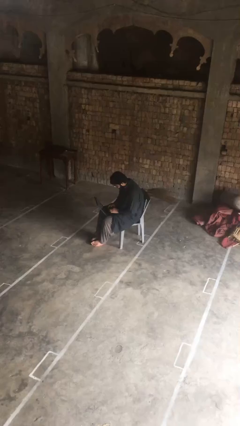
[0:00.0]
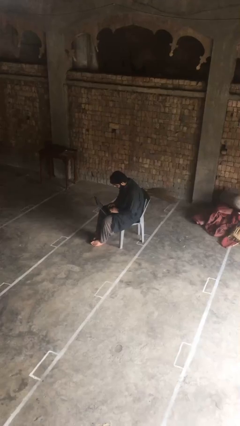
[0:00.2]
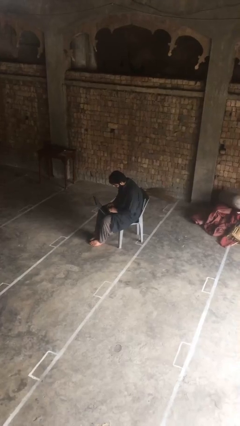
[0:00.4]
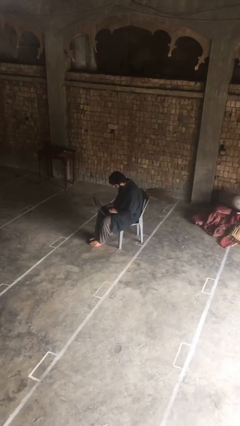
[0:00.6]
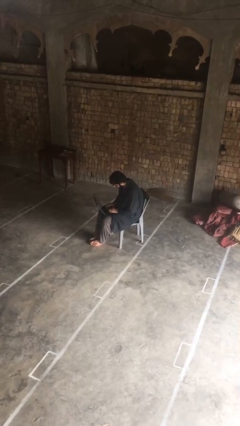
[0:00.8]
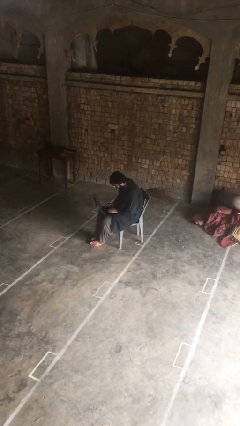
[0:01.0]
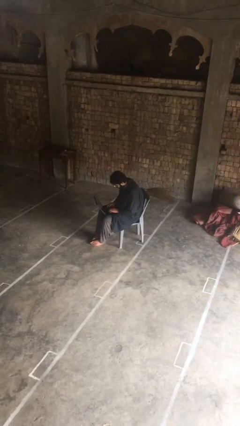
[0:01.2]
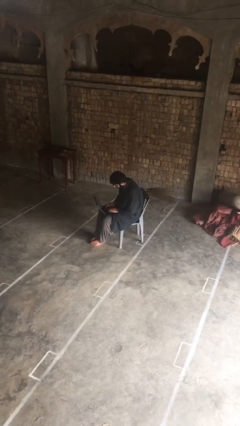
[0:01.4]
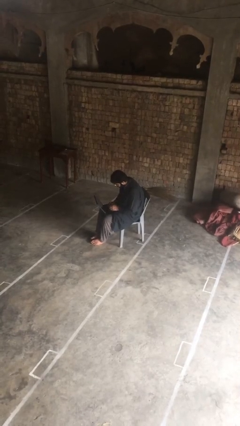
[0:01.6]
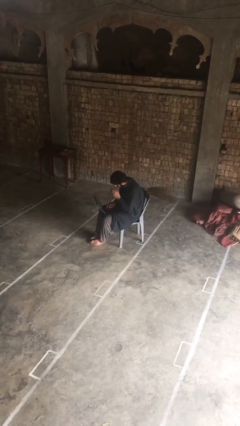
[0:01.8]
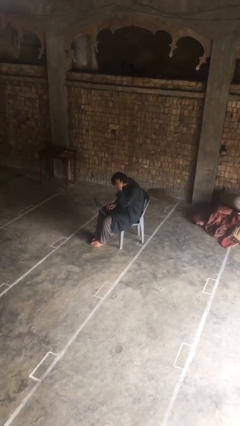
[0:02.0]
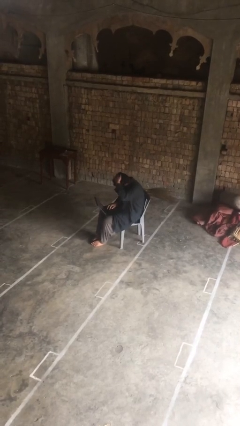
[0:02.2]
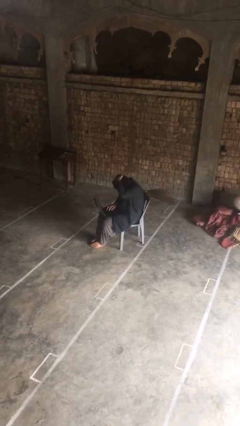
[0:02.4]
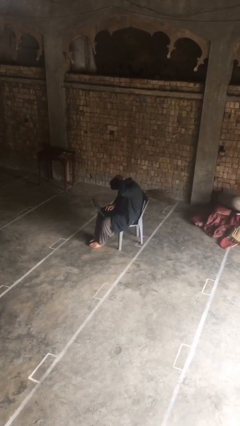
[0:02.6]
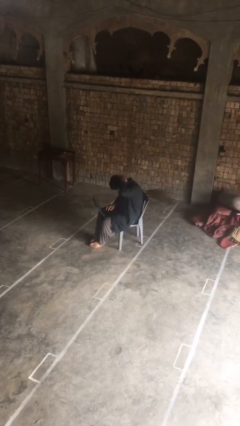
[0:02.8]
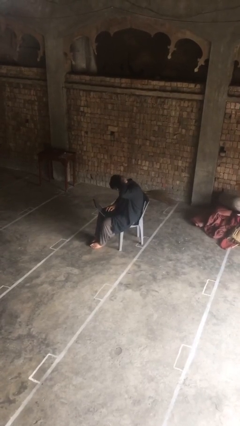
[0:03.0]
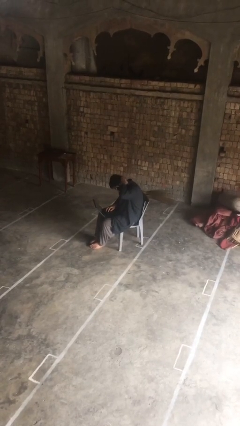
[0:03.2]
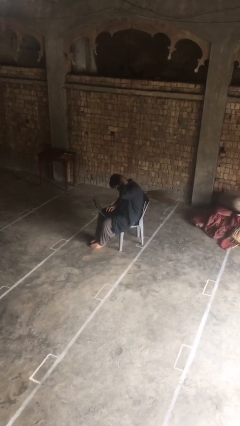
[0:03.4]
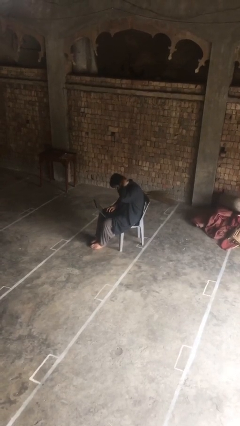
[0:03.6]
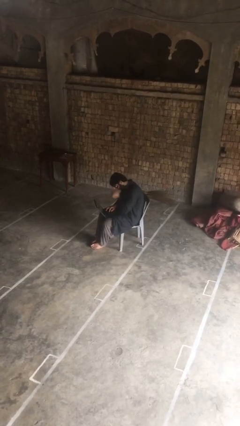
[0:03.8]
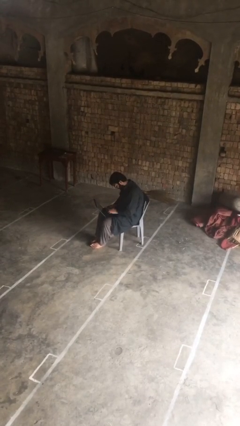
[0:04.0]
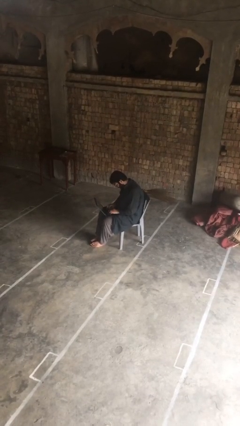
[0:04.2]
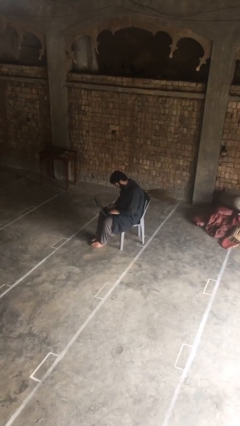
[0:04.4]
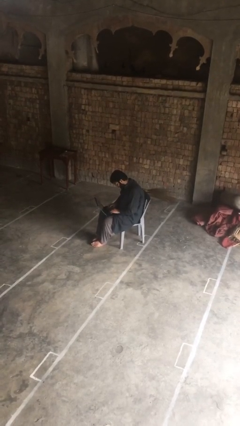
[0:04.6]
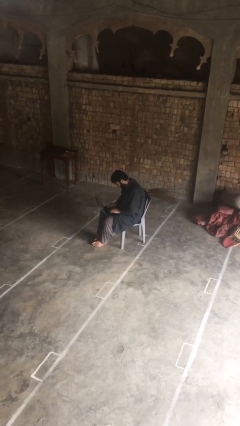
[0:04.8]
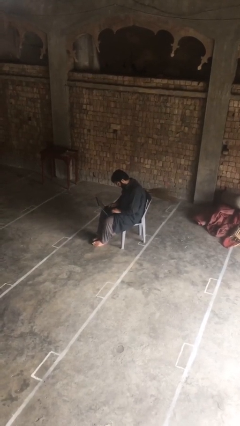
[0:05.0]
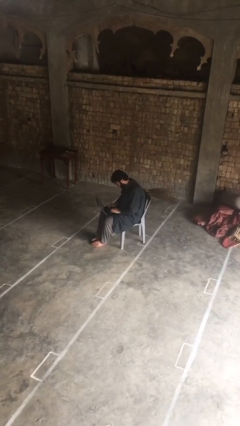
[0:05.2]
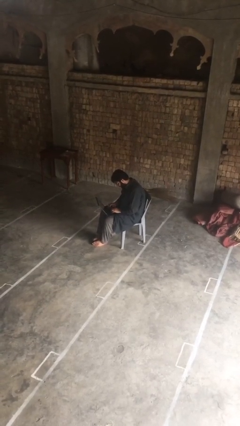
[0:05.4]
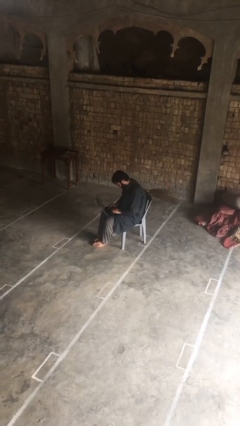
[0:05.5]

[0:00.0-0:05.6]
person interacts with laptop

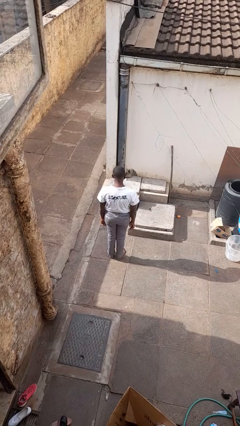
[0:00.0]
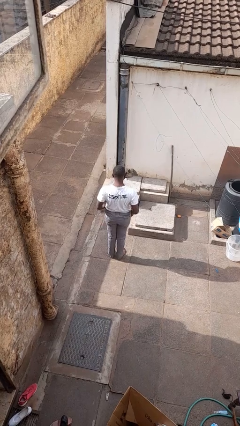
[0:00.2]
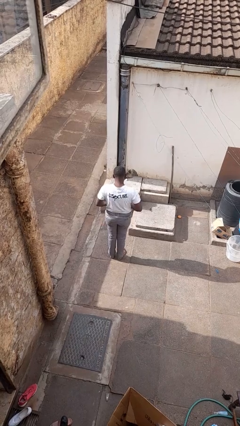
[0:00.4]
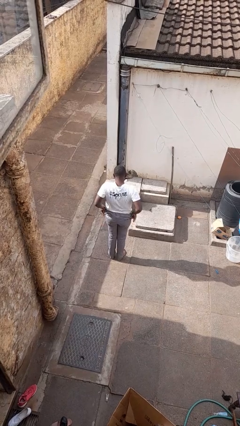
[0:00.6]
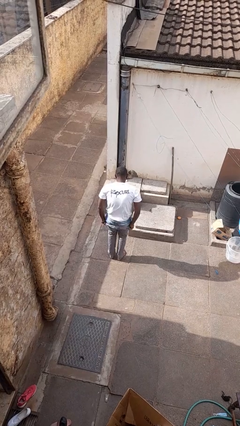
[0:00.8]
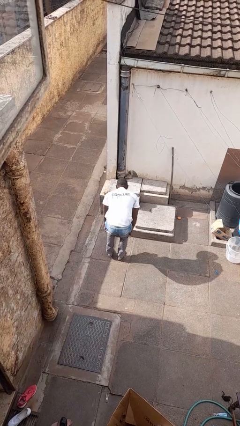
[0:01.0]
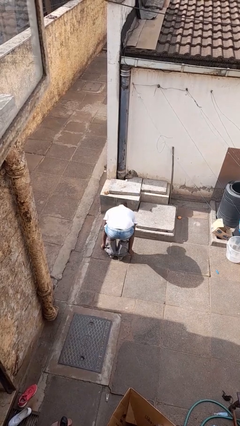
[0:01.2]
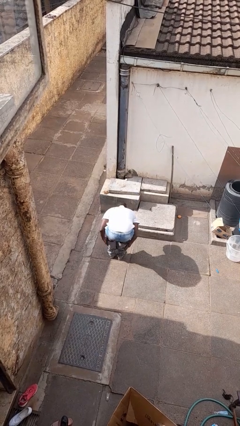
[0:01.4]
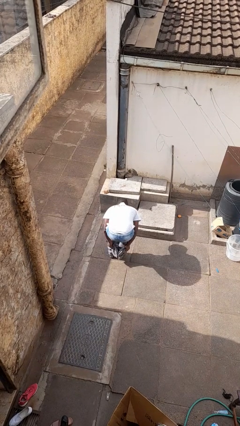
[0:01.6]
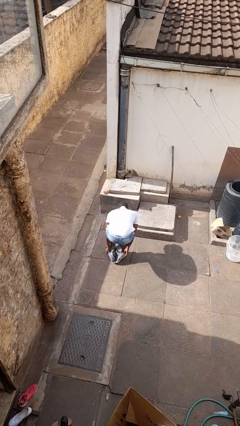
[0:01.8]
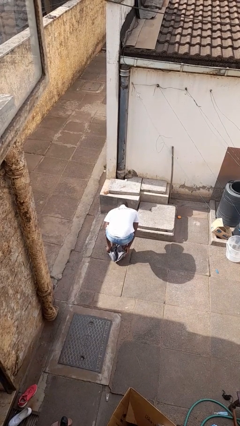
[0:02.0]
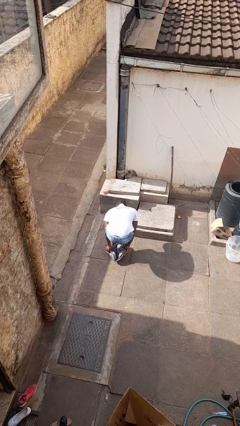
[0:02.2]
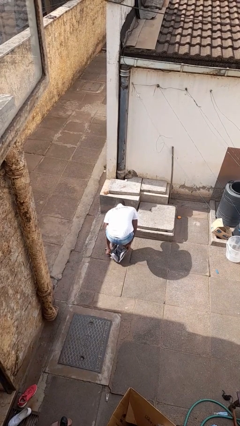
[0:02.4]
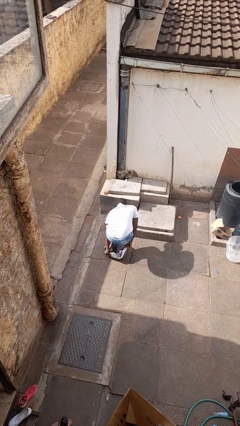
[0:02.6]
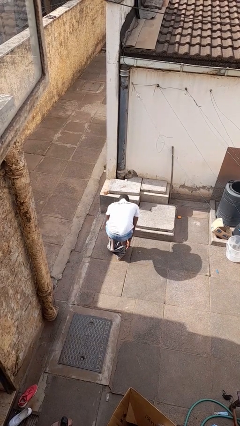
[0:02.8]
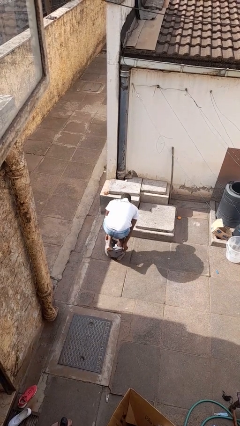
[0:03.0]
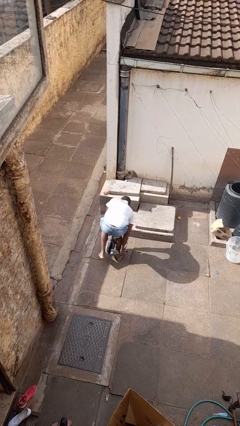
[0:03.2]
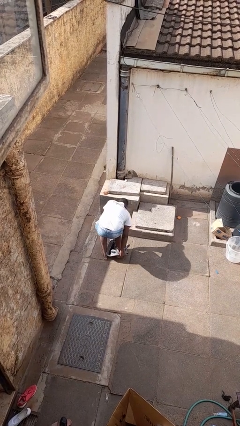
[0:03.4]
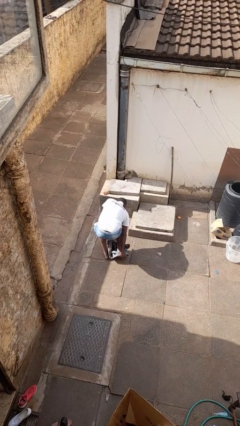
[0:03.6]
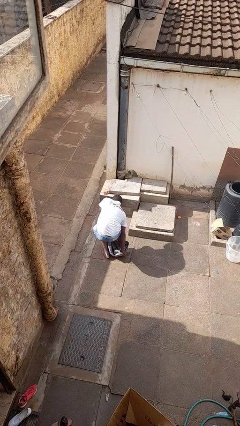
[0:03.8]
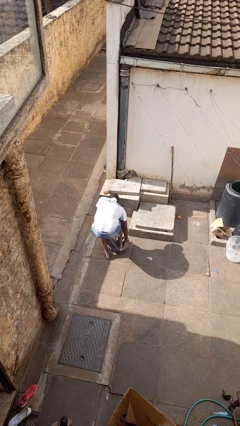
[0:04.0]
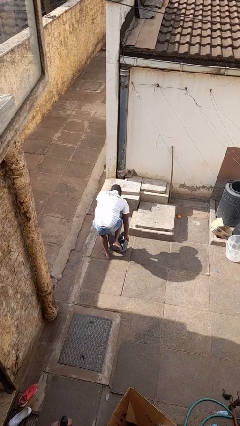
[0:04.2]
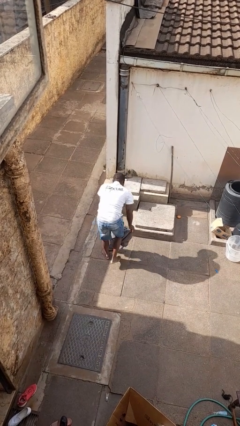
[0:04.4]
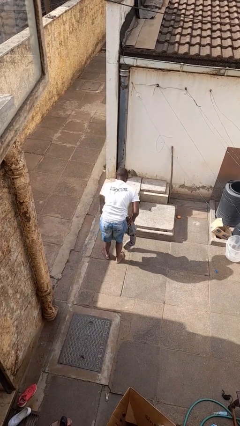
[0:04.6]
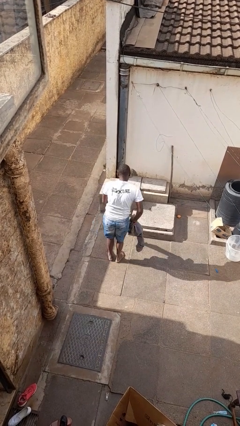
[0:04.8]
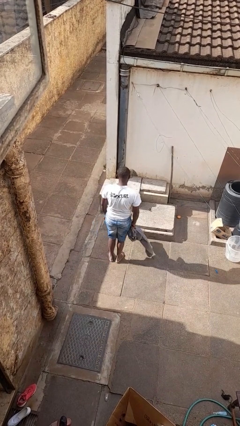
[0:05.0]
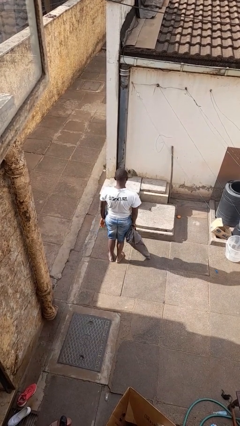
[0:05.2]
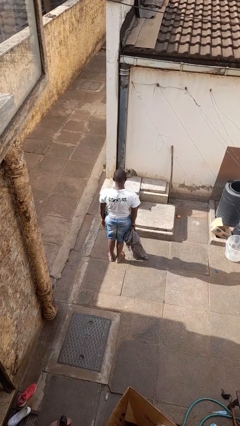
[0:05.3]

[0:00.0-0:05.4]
person takes off pants

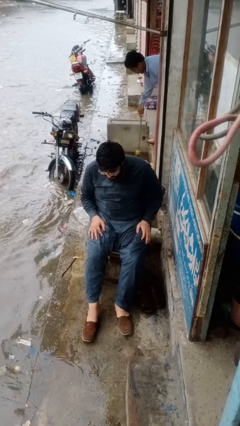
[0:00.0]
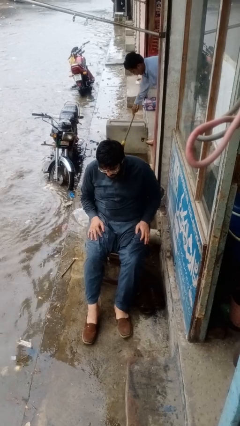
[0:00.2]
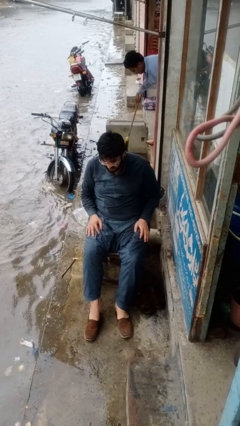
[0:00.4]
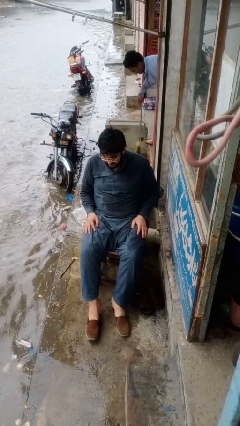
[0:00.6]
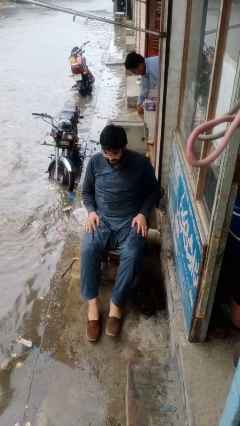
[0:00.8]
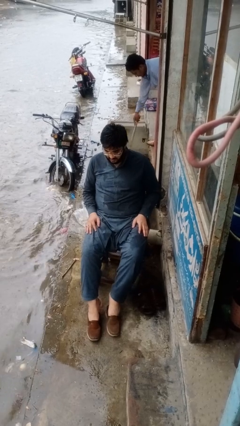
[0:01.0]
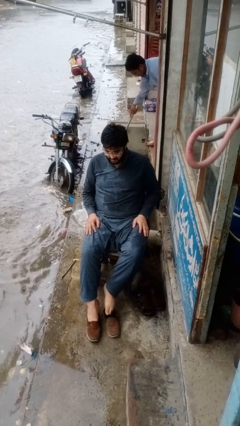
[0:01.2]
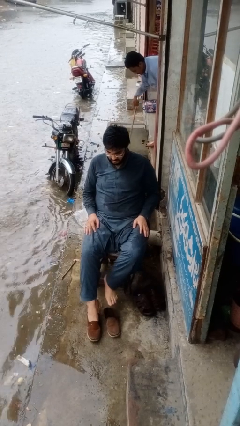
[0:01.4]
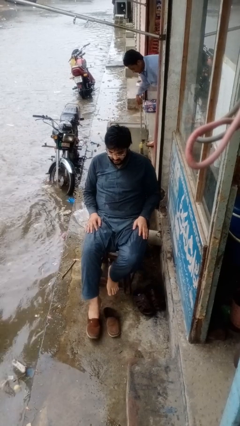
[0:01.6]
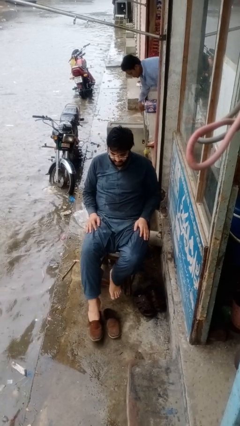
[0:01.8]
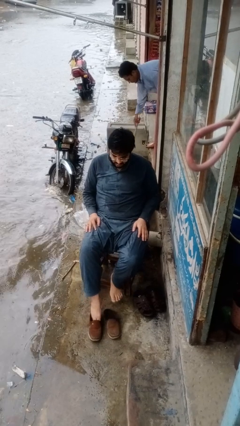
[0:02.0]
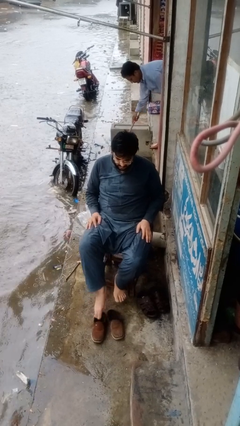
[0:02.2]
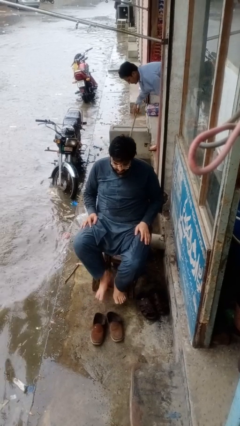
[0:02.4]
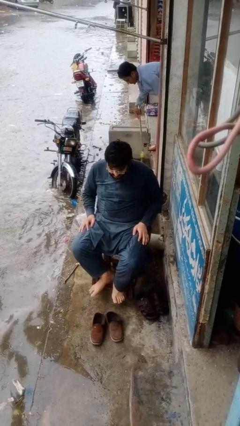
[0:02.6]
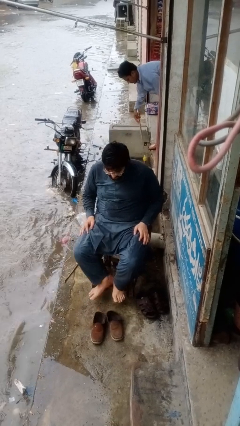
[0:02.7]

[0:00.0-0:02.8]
person takes off shoes

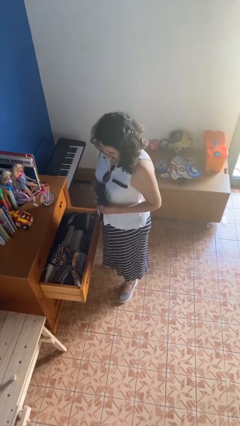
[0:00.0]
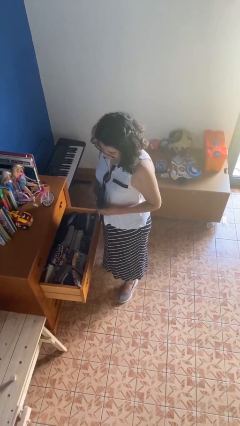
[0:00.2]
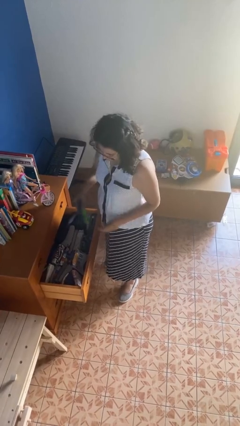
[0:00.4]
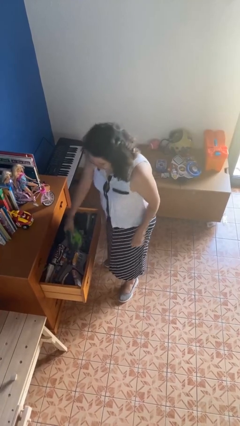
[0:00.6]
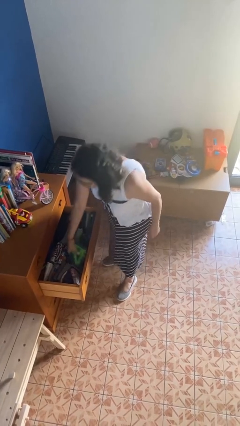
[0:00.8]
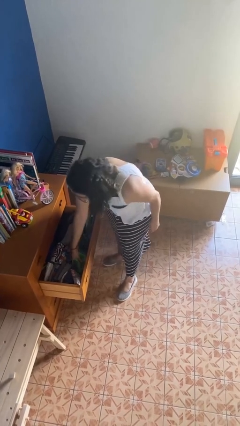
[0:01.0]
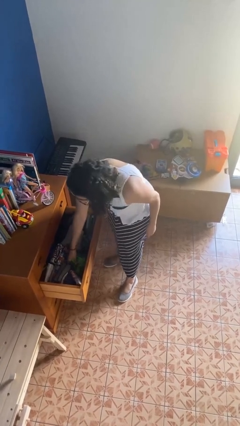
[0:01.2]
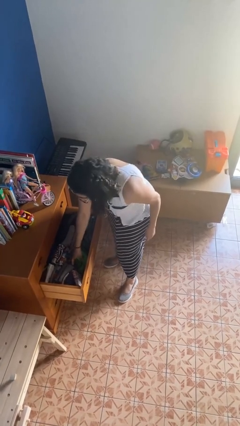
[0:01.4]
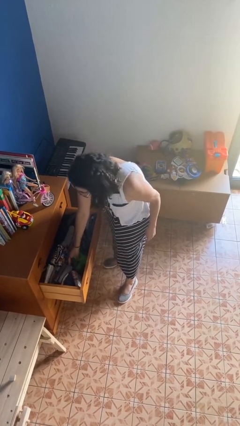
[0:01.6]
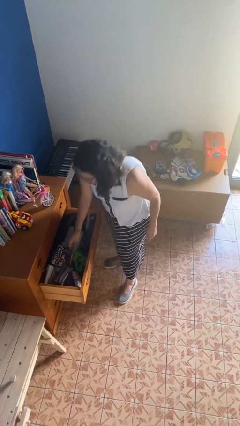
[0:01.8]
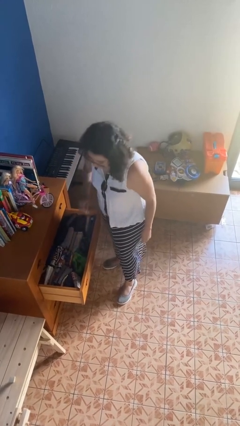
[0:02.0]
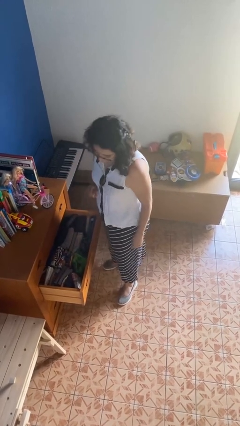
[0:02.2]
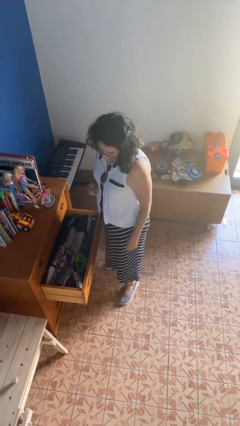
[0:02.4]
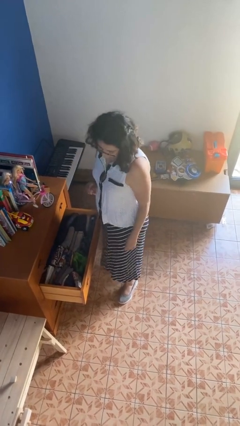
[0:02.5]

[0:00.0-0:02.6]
person puts clothes into dresser

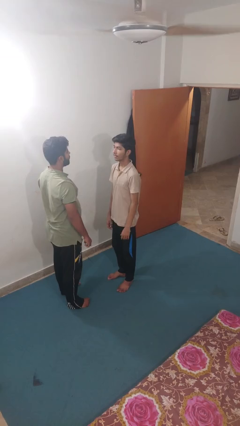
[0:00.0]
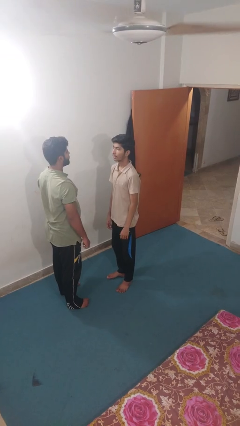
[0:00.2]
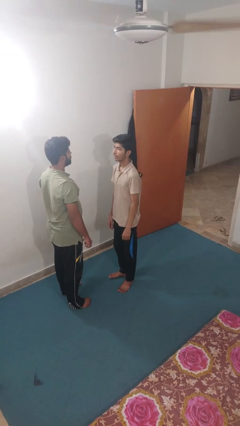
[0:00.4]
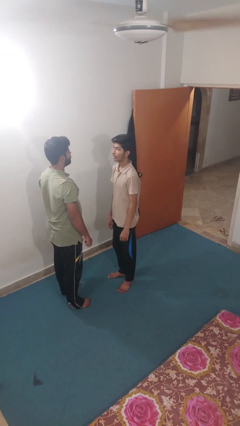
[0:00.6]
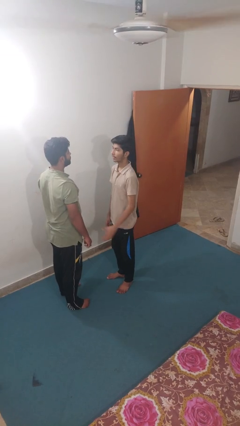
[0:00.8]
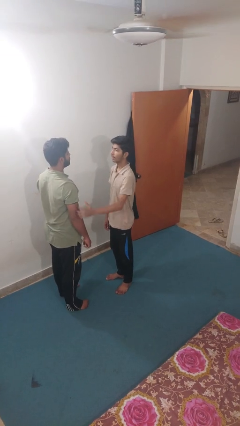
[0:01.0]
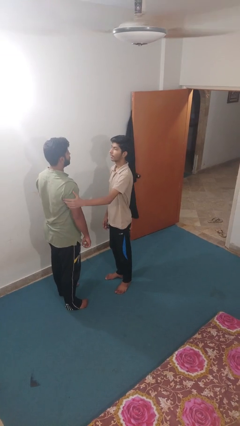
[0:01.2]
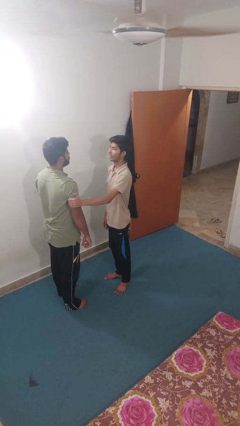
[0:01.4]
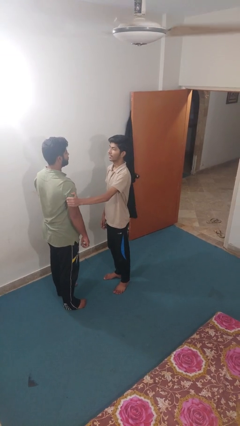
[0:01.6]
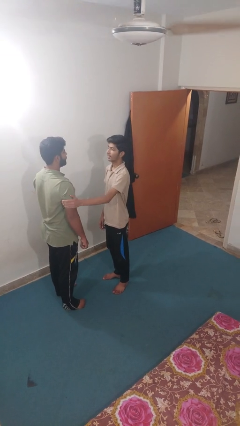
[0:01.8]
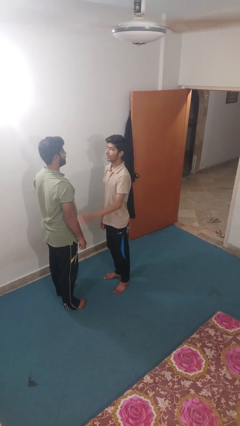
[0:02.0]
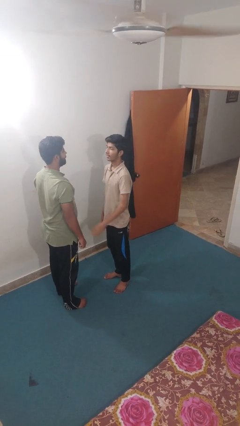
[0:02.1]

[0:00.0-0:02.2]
person grabs person by bicep
